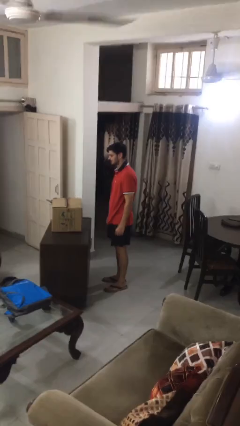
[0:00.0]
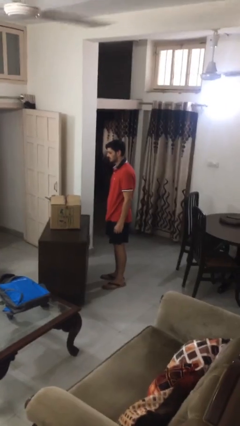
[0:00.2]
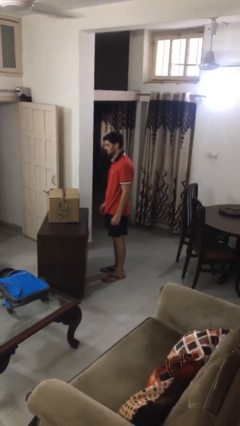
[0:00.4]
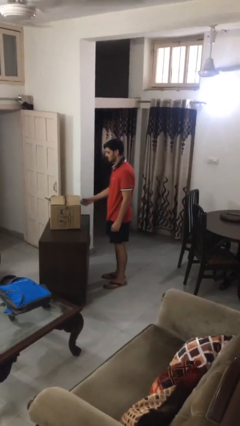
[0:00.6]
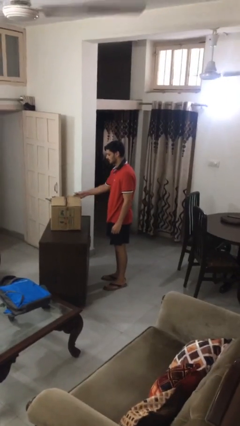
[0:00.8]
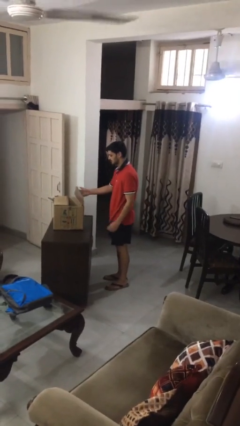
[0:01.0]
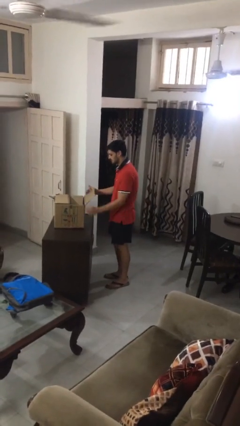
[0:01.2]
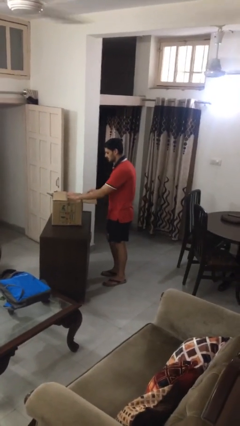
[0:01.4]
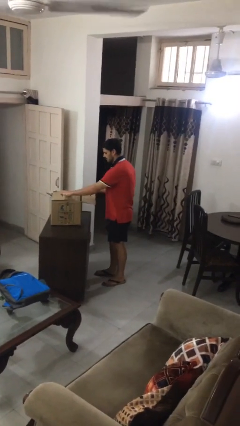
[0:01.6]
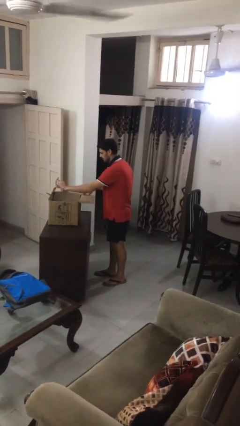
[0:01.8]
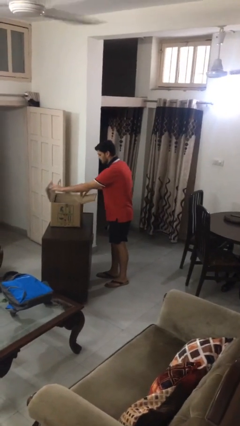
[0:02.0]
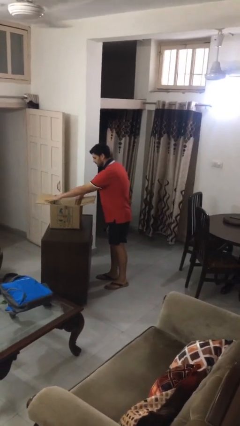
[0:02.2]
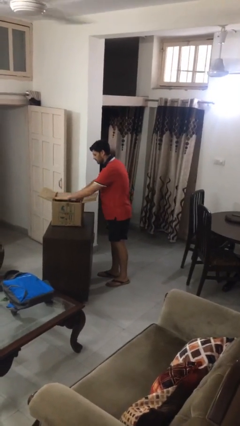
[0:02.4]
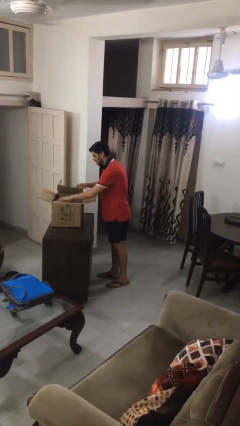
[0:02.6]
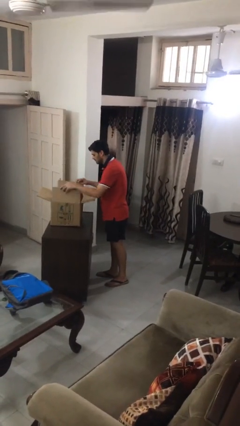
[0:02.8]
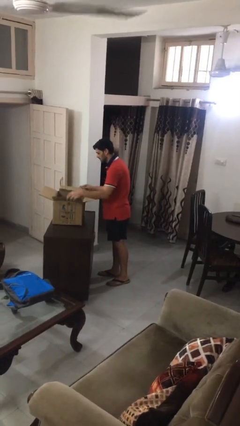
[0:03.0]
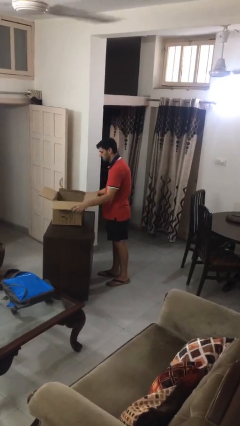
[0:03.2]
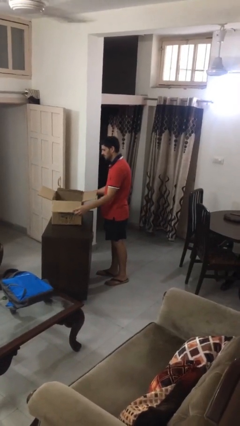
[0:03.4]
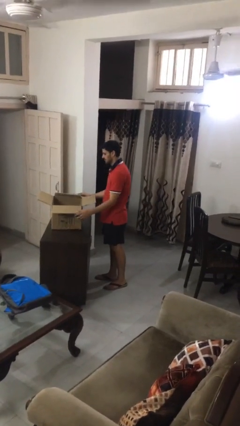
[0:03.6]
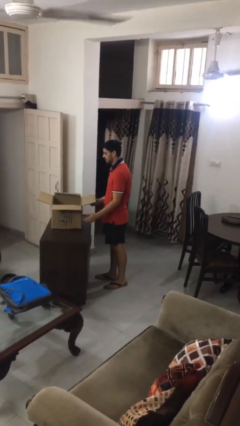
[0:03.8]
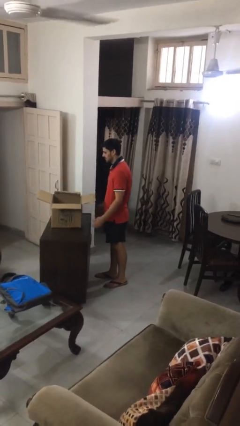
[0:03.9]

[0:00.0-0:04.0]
person opens box

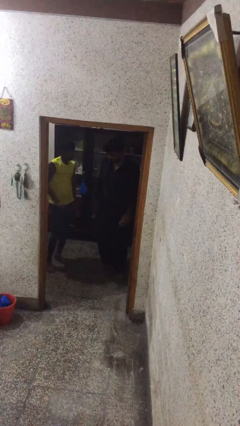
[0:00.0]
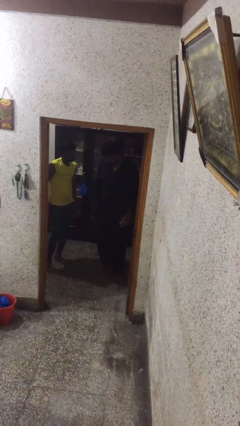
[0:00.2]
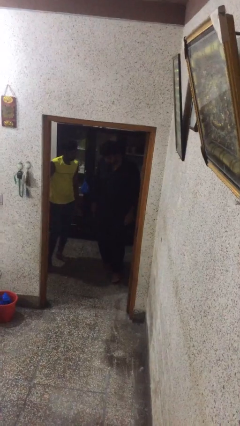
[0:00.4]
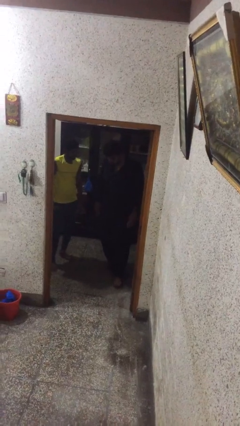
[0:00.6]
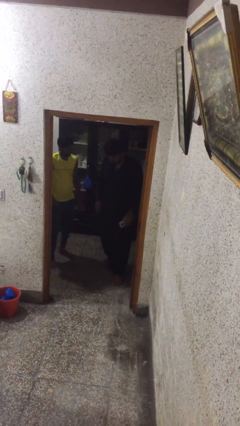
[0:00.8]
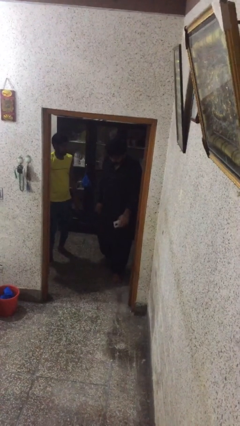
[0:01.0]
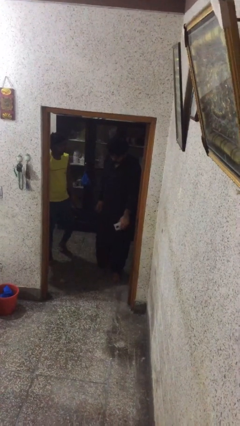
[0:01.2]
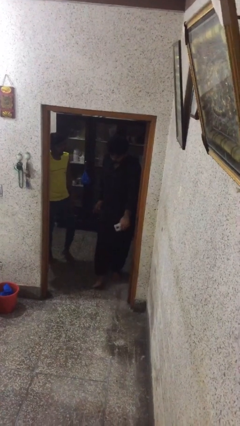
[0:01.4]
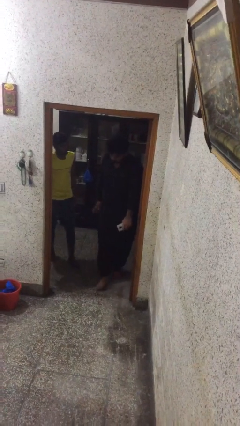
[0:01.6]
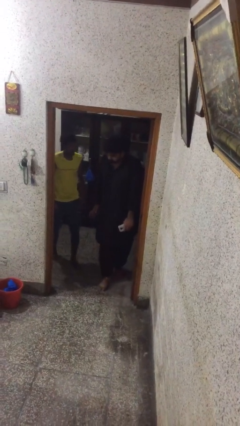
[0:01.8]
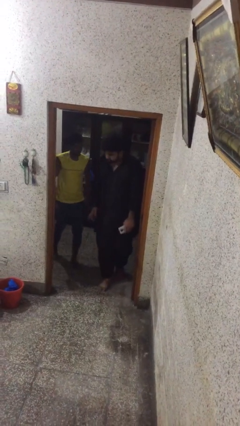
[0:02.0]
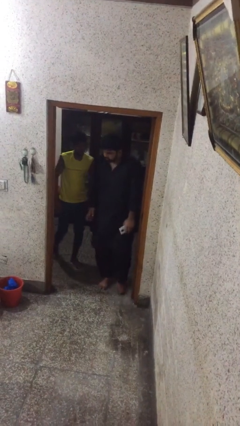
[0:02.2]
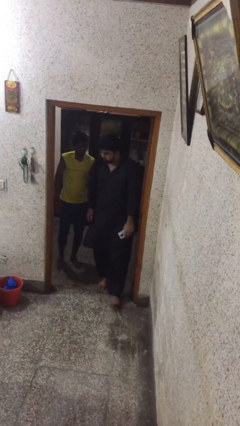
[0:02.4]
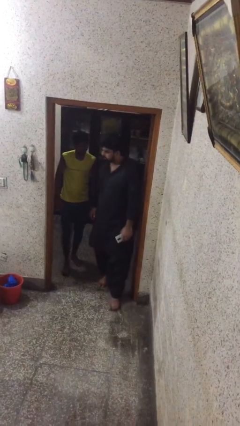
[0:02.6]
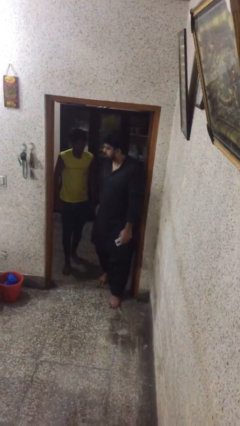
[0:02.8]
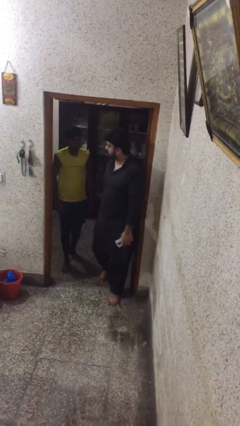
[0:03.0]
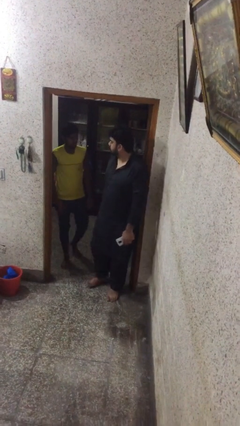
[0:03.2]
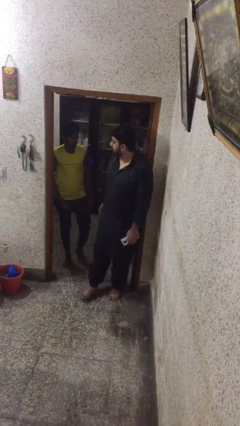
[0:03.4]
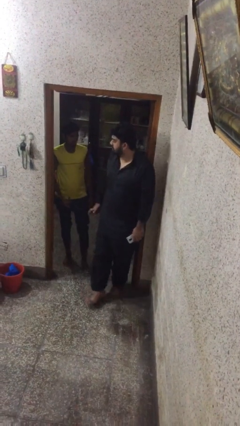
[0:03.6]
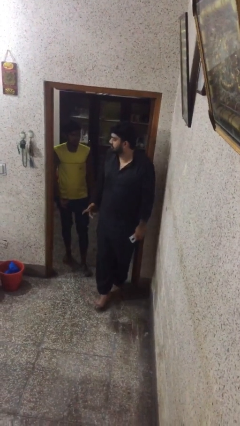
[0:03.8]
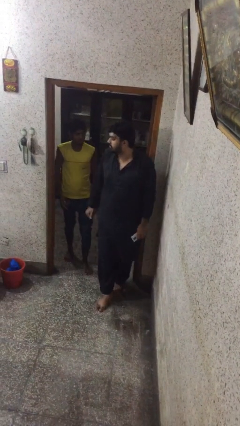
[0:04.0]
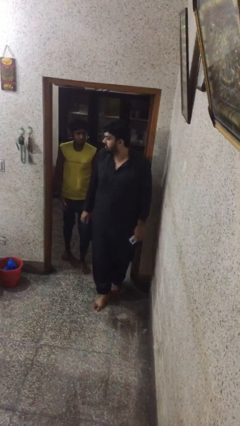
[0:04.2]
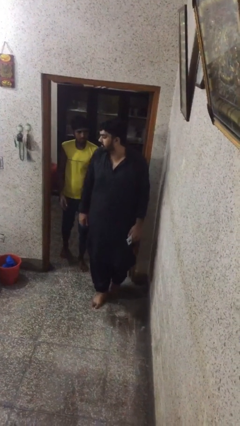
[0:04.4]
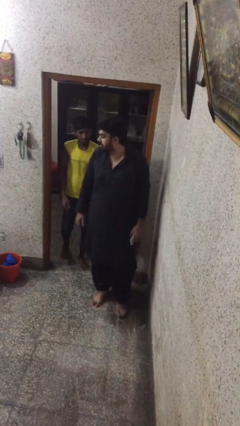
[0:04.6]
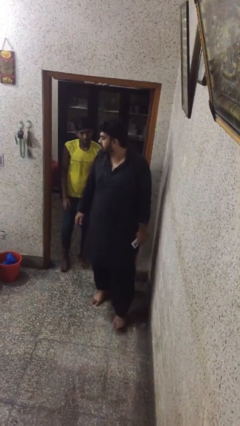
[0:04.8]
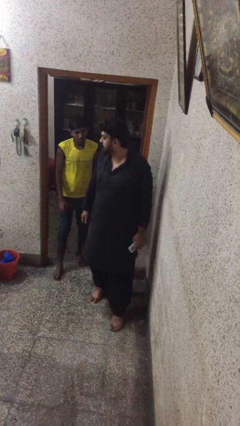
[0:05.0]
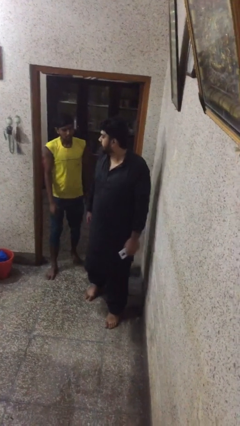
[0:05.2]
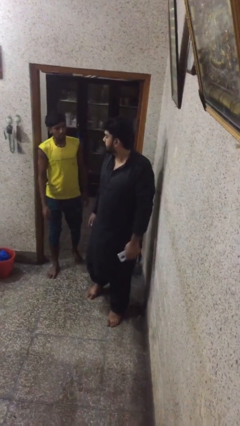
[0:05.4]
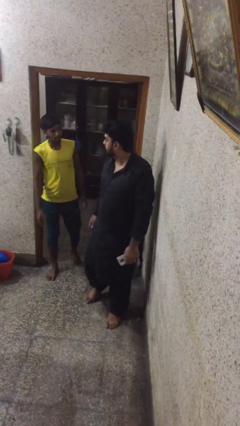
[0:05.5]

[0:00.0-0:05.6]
person talks to person

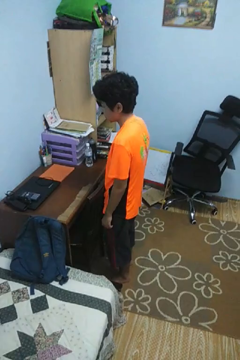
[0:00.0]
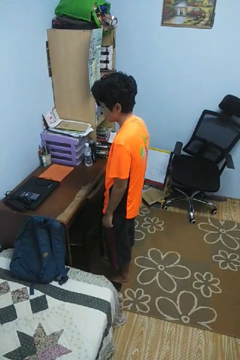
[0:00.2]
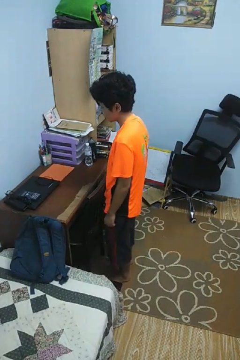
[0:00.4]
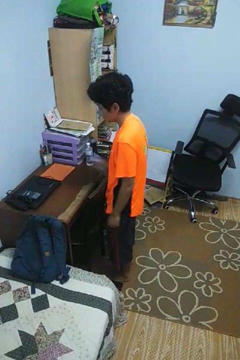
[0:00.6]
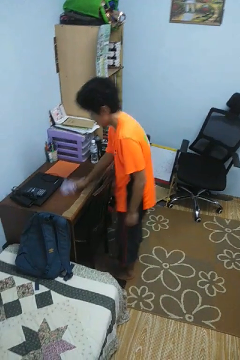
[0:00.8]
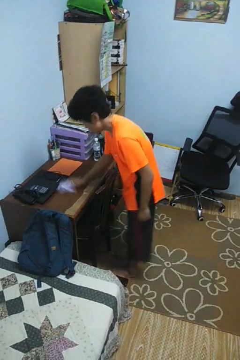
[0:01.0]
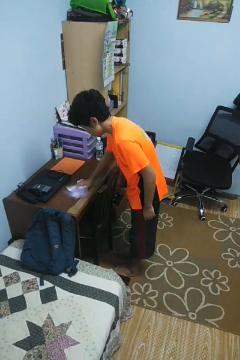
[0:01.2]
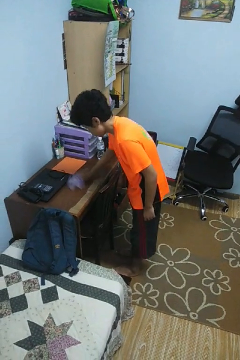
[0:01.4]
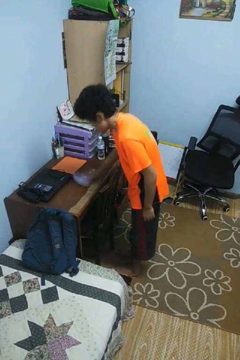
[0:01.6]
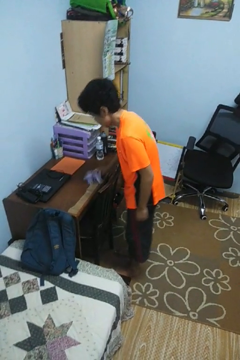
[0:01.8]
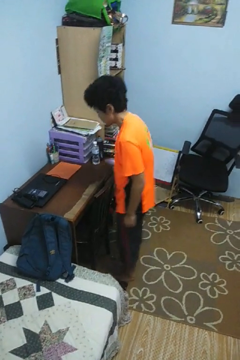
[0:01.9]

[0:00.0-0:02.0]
person cleans table with rag

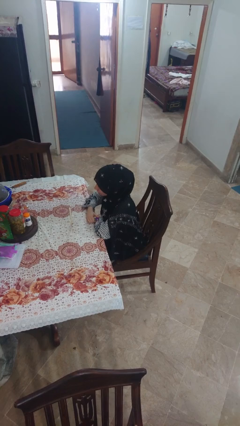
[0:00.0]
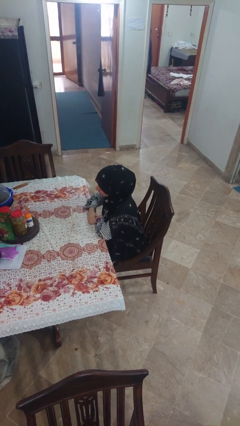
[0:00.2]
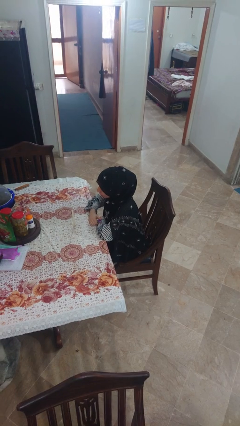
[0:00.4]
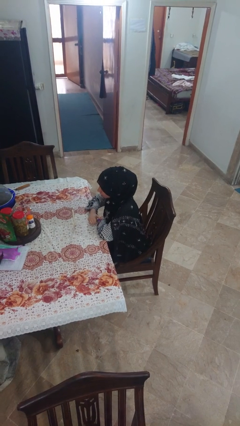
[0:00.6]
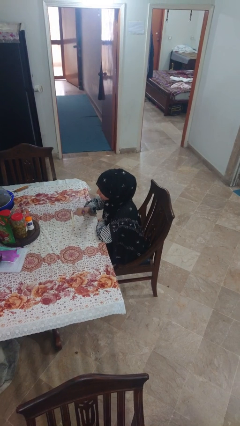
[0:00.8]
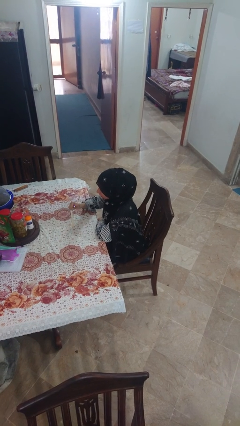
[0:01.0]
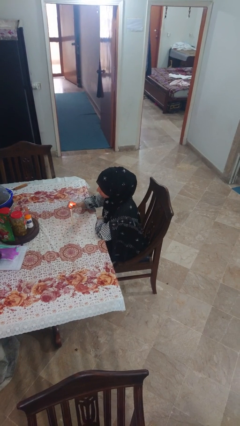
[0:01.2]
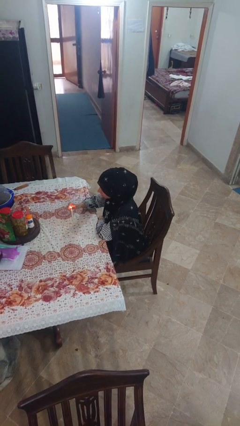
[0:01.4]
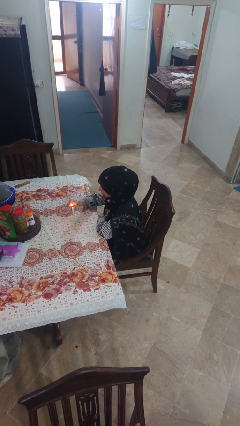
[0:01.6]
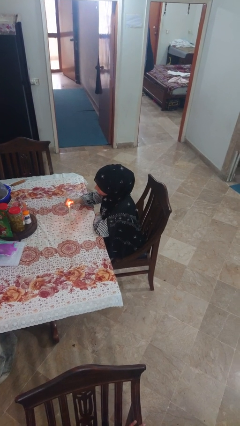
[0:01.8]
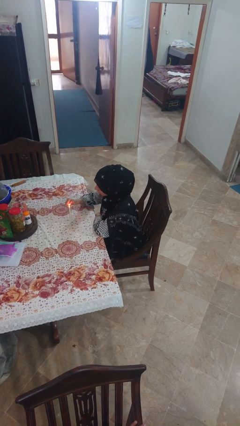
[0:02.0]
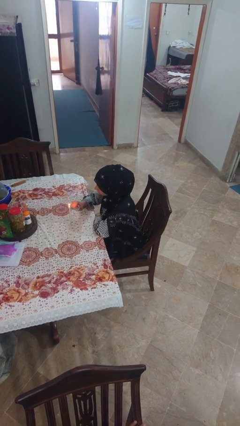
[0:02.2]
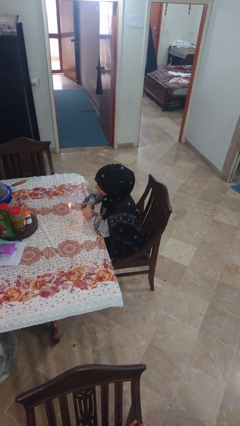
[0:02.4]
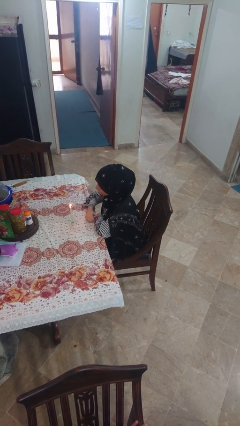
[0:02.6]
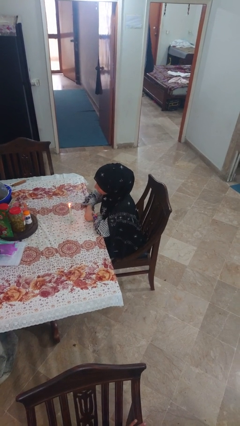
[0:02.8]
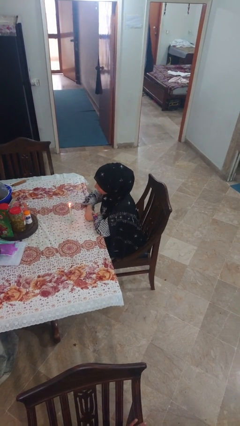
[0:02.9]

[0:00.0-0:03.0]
person lights candle

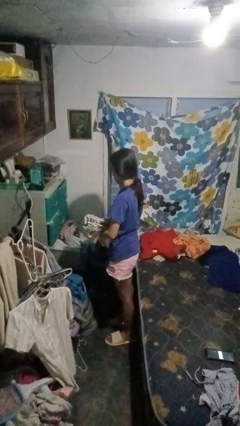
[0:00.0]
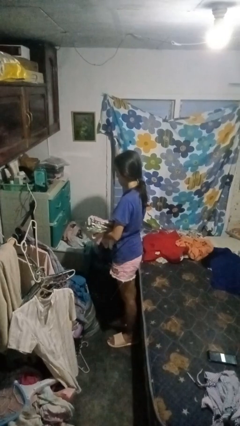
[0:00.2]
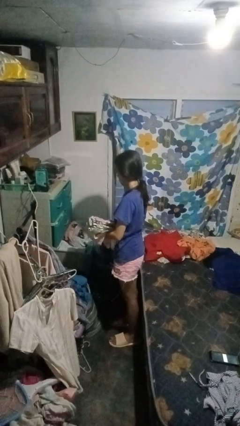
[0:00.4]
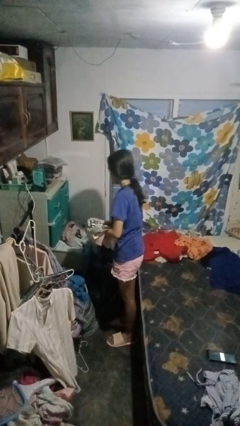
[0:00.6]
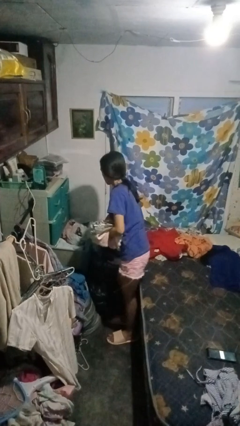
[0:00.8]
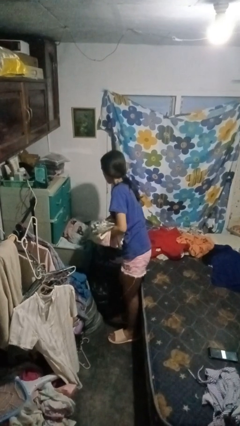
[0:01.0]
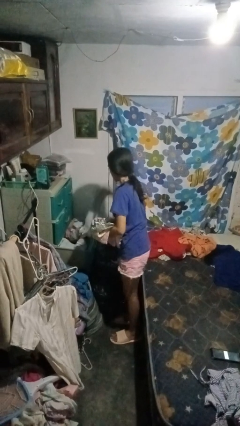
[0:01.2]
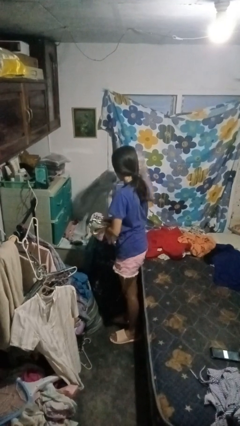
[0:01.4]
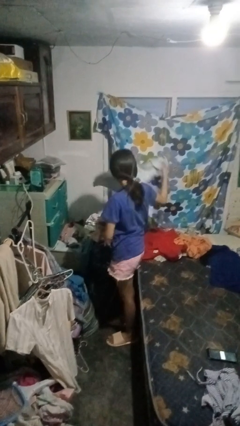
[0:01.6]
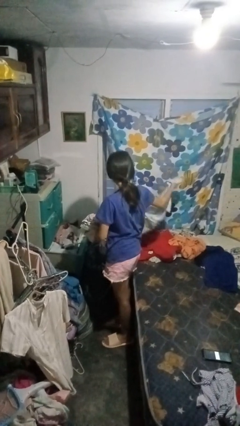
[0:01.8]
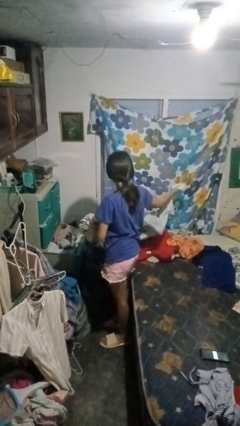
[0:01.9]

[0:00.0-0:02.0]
person takes clothes from dresser

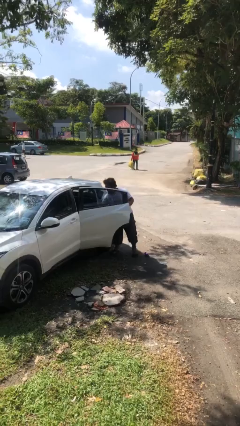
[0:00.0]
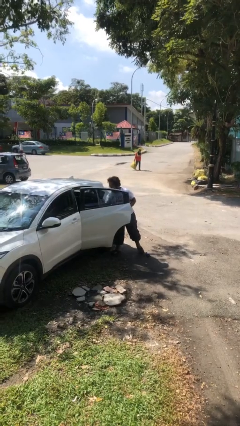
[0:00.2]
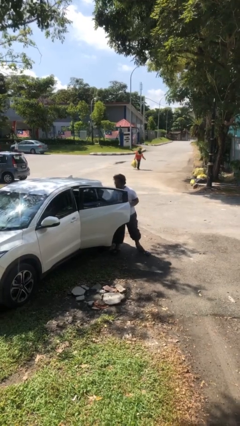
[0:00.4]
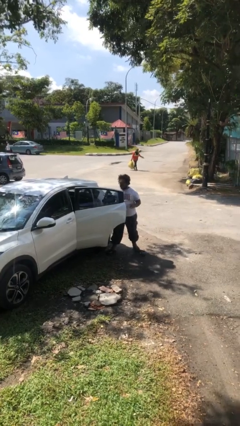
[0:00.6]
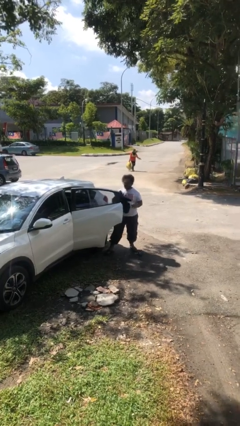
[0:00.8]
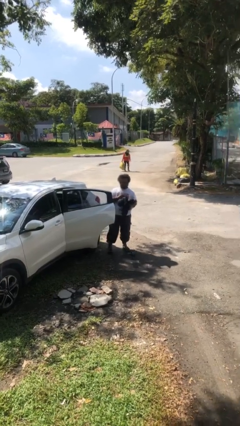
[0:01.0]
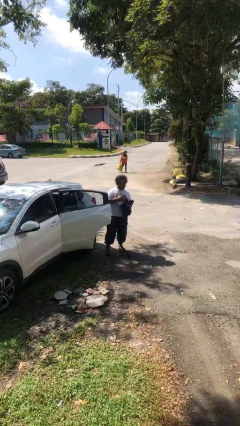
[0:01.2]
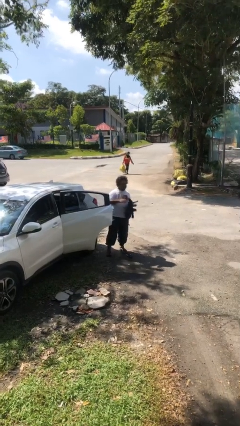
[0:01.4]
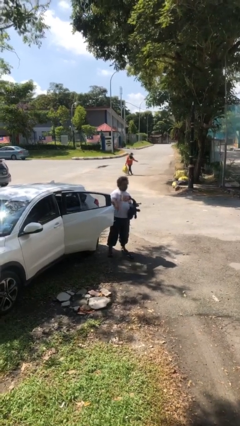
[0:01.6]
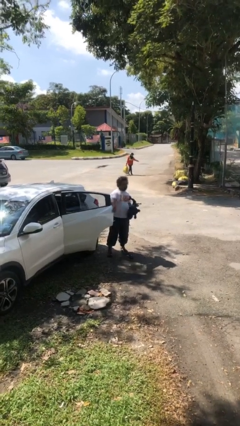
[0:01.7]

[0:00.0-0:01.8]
person unloads car
